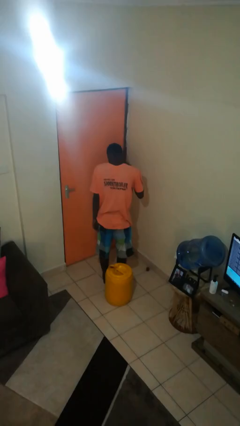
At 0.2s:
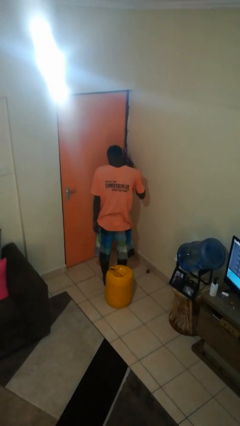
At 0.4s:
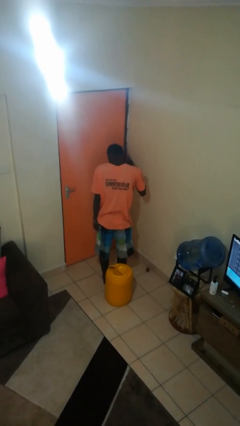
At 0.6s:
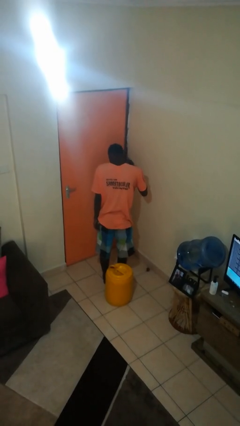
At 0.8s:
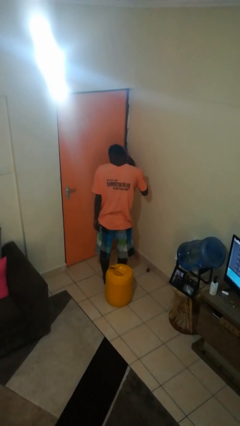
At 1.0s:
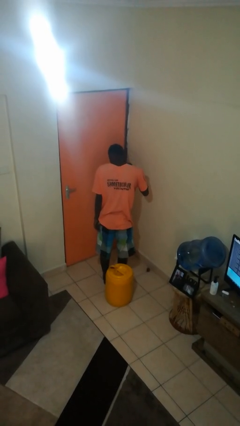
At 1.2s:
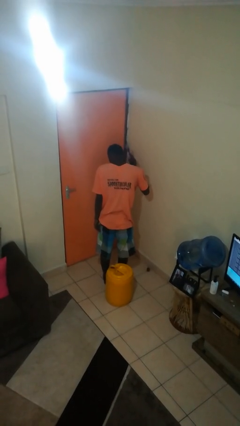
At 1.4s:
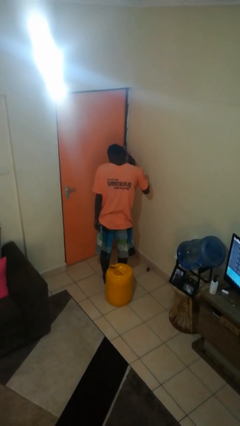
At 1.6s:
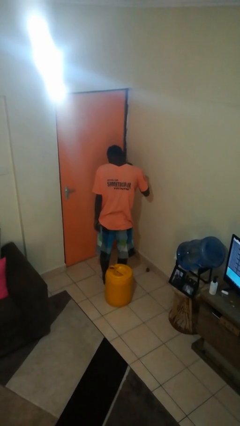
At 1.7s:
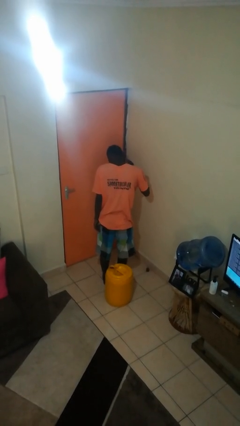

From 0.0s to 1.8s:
person brushes hair

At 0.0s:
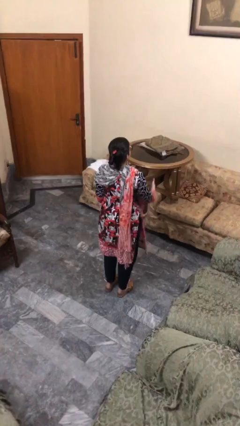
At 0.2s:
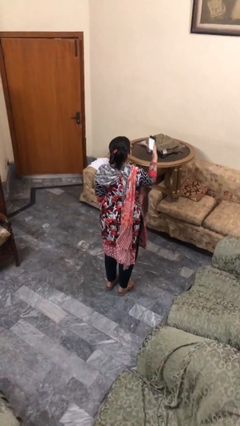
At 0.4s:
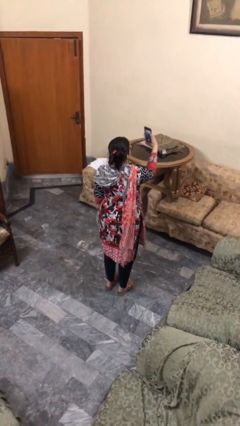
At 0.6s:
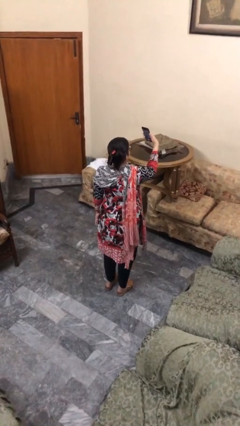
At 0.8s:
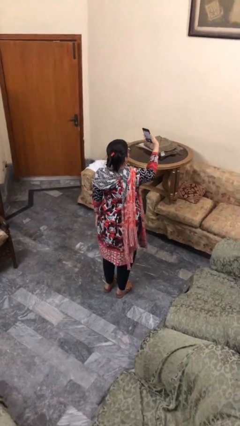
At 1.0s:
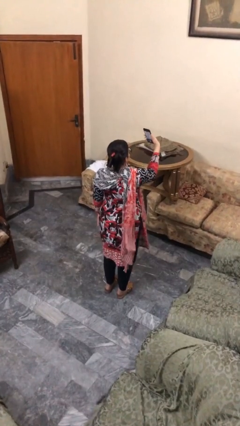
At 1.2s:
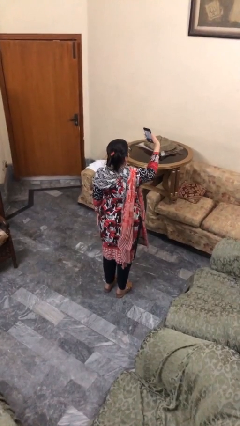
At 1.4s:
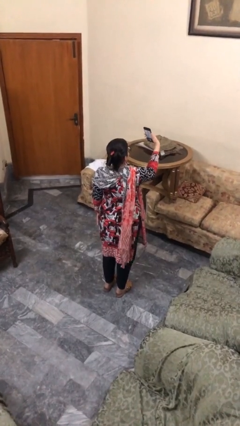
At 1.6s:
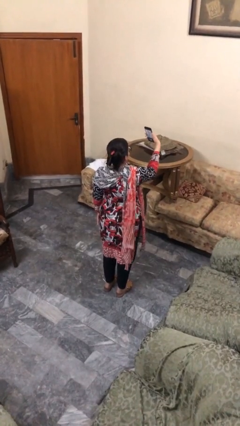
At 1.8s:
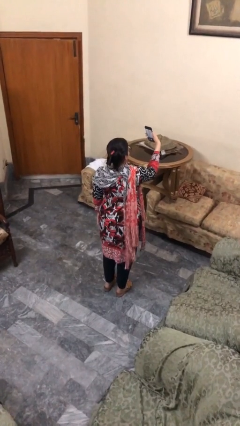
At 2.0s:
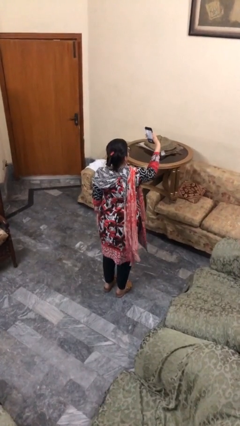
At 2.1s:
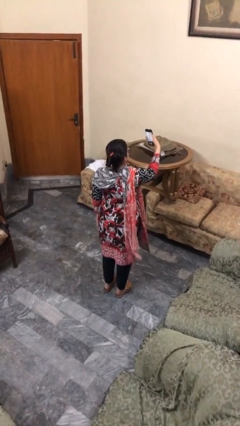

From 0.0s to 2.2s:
person takes selfie

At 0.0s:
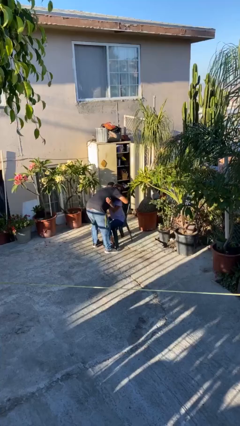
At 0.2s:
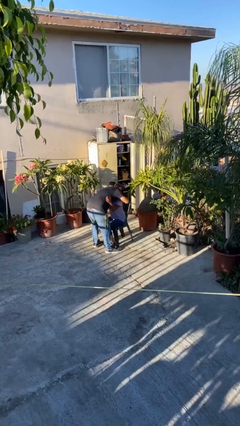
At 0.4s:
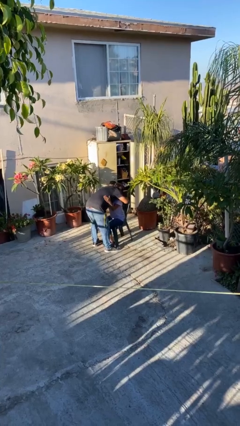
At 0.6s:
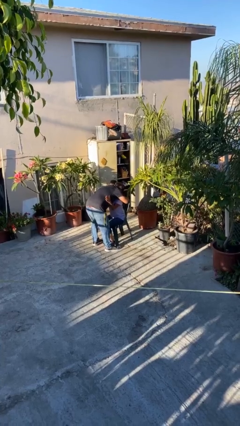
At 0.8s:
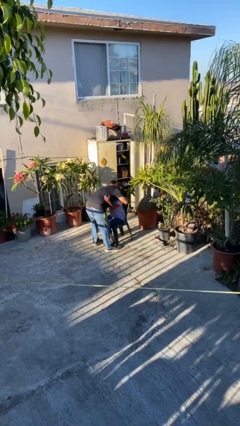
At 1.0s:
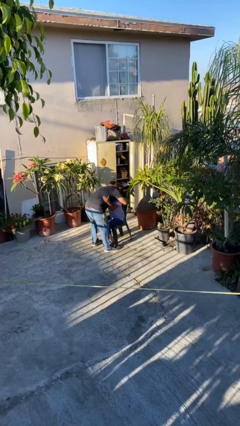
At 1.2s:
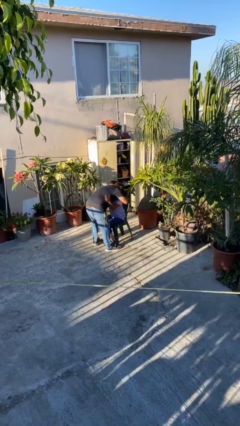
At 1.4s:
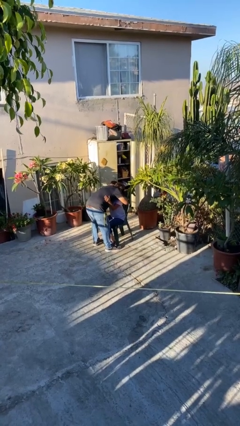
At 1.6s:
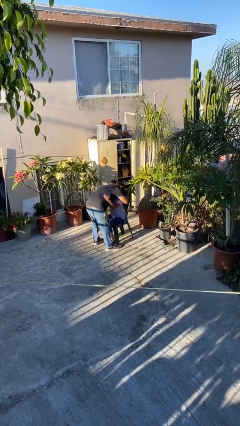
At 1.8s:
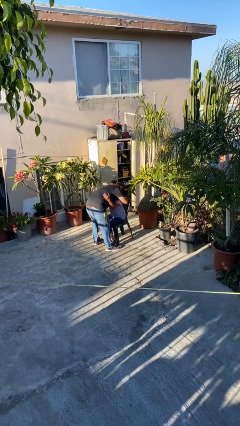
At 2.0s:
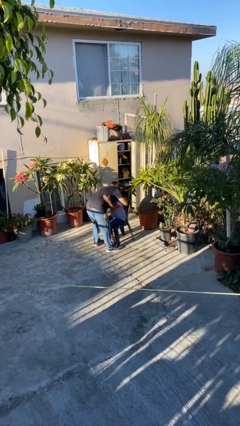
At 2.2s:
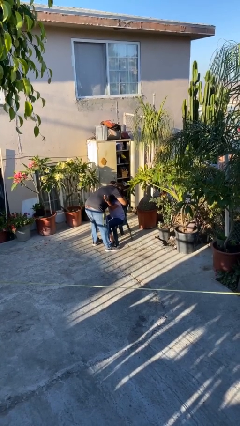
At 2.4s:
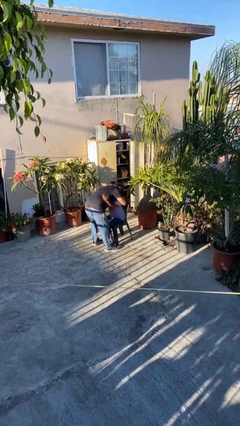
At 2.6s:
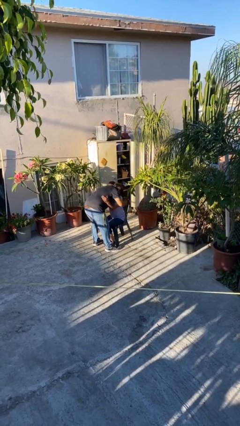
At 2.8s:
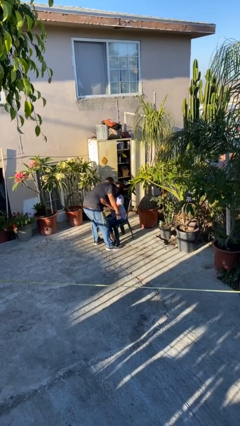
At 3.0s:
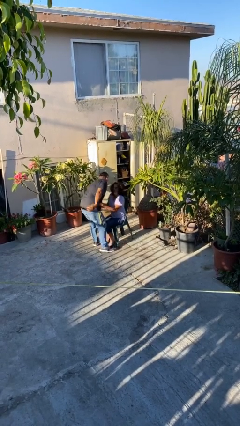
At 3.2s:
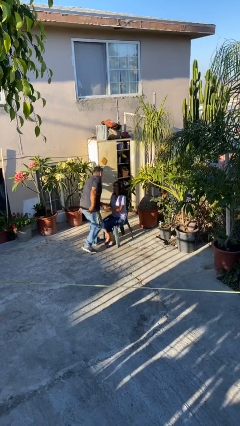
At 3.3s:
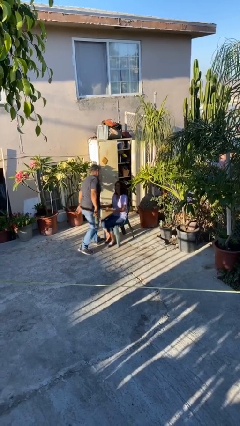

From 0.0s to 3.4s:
person embraces person

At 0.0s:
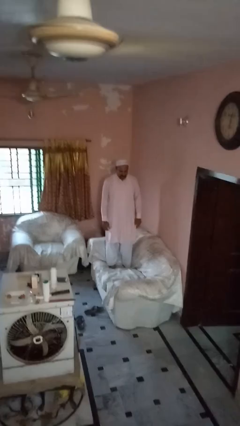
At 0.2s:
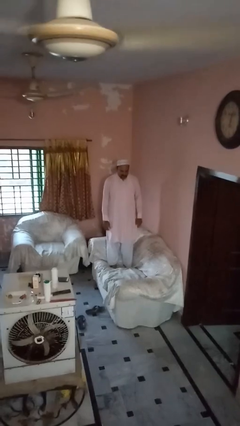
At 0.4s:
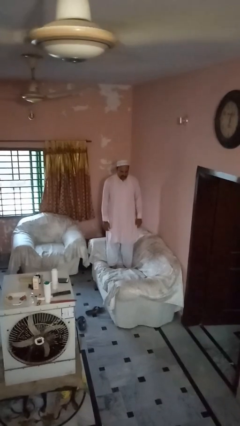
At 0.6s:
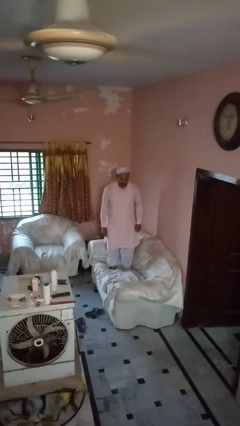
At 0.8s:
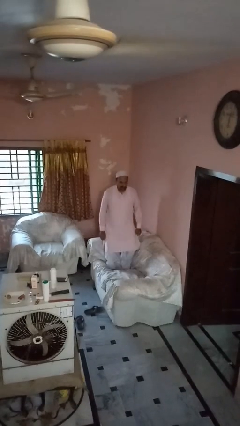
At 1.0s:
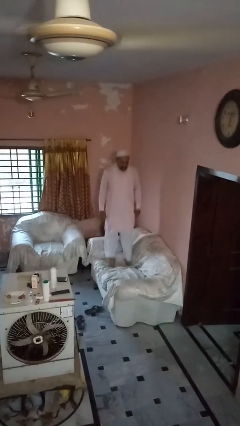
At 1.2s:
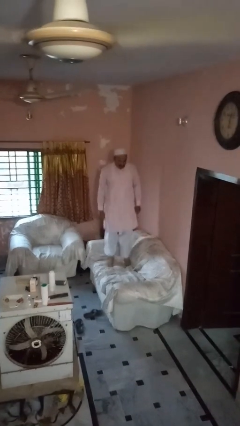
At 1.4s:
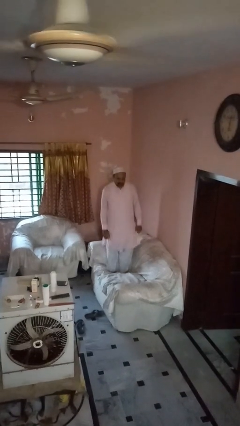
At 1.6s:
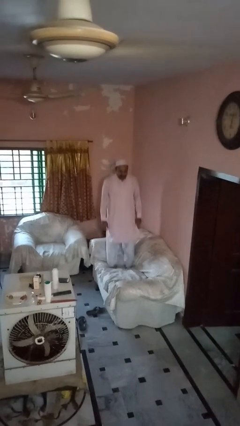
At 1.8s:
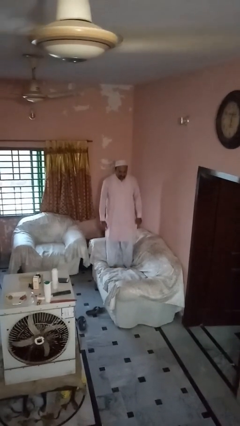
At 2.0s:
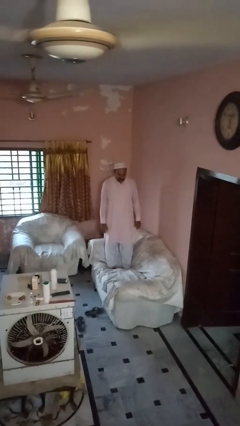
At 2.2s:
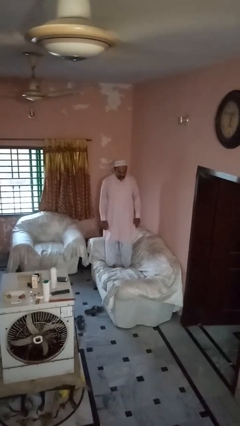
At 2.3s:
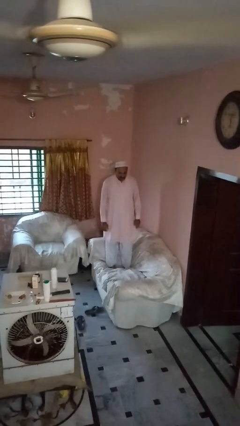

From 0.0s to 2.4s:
person jumps on couch

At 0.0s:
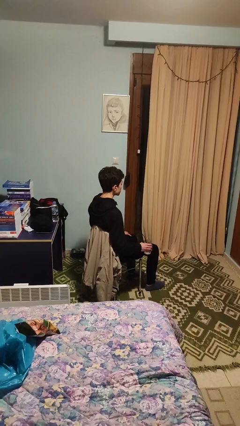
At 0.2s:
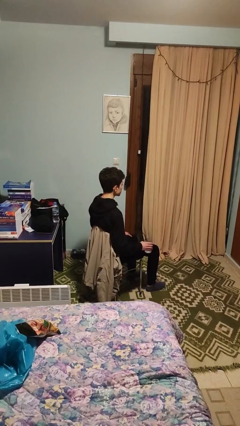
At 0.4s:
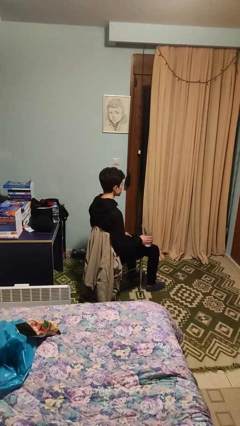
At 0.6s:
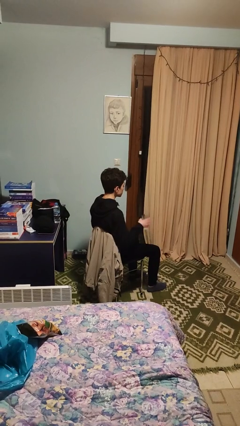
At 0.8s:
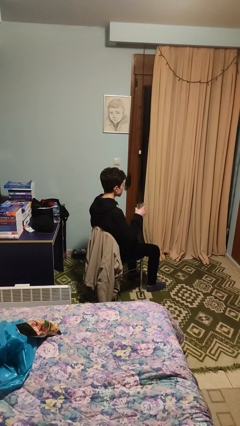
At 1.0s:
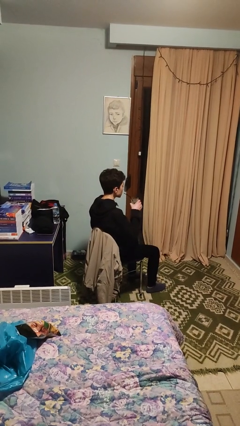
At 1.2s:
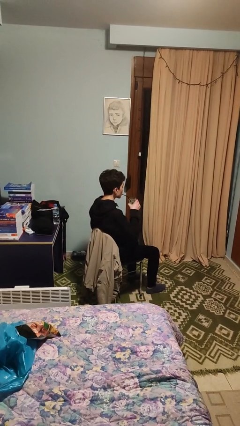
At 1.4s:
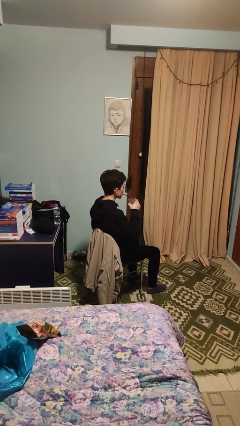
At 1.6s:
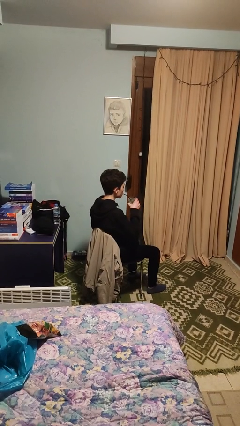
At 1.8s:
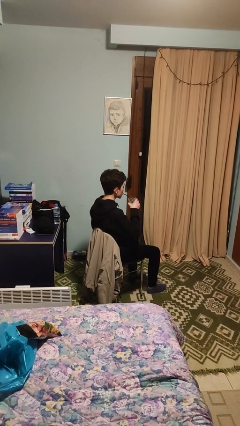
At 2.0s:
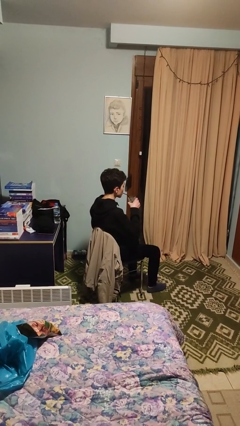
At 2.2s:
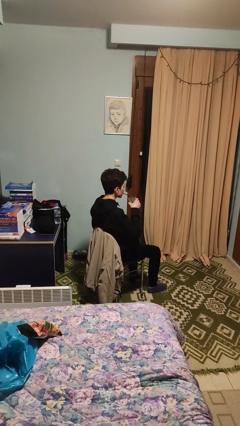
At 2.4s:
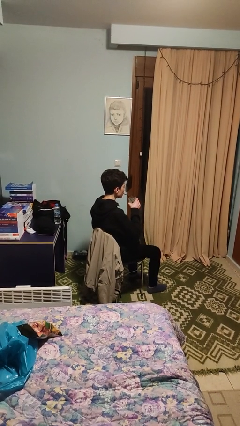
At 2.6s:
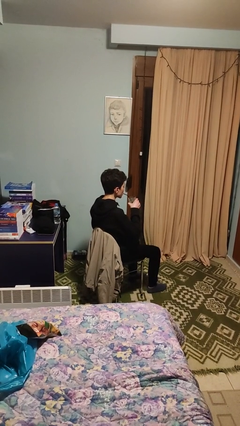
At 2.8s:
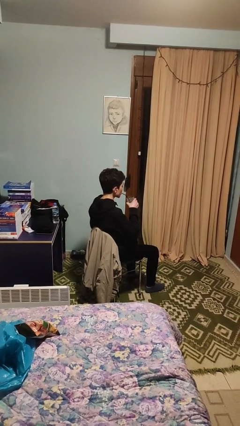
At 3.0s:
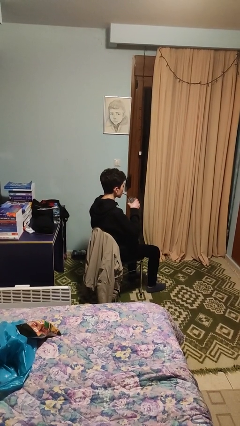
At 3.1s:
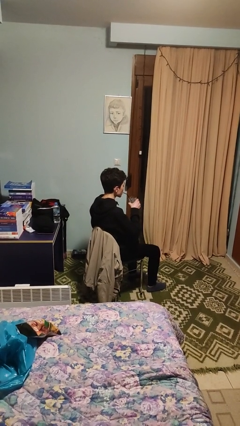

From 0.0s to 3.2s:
person drinks from straw

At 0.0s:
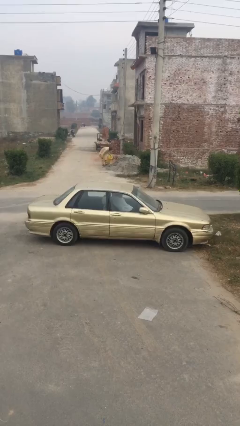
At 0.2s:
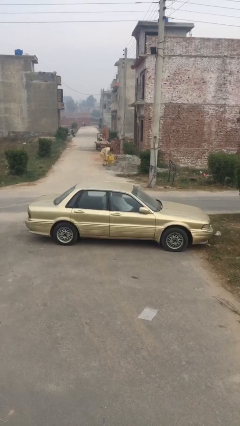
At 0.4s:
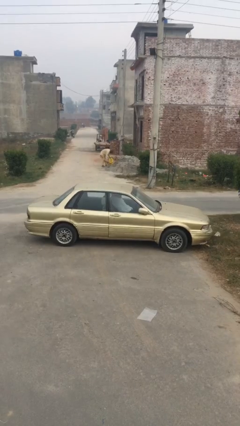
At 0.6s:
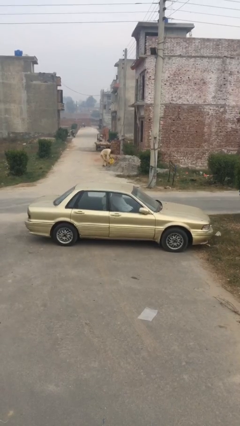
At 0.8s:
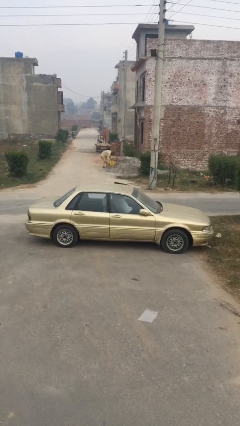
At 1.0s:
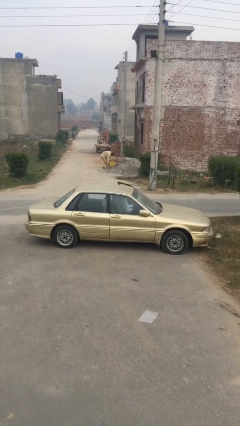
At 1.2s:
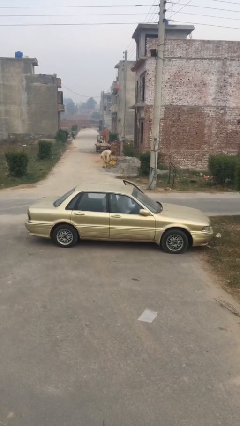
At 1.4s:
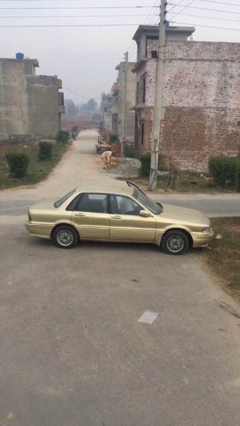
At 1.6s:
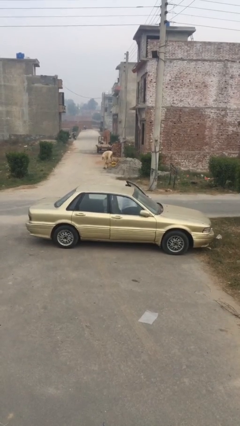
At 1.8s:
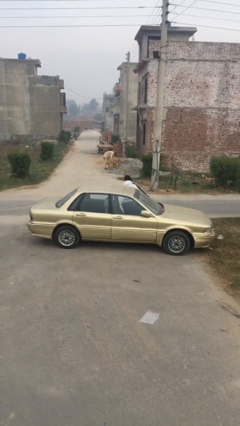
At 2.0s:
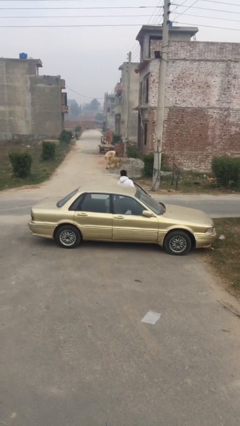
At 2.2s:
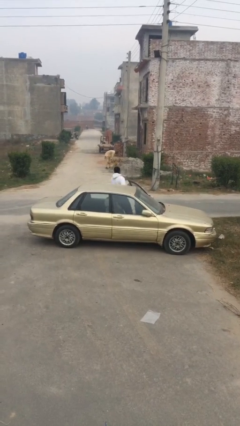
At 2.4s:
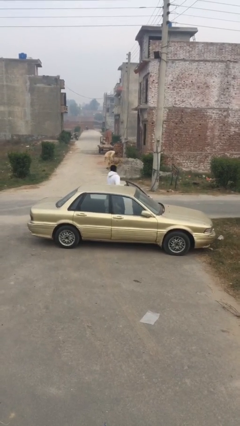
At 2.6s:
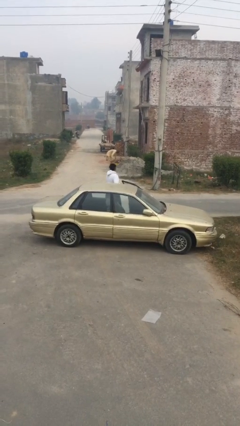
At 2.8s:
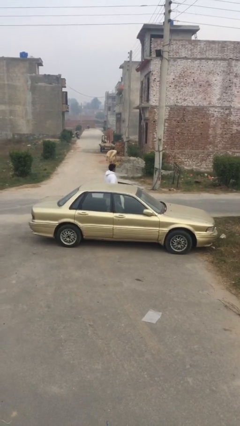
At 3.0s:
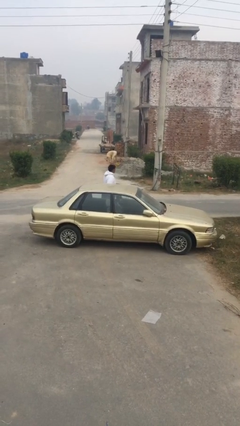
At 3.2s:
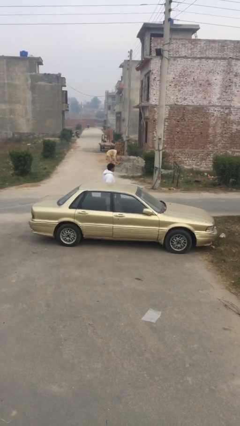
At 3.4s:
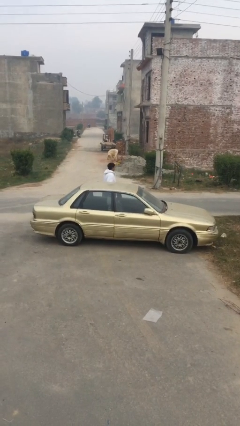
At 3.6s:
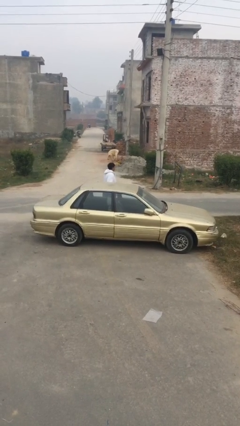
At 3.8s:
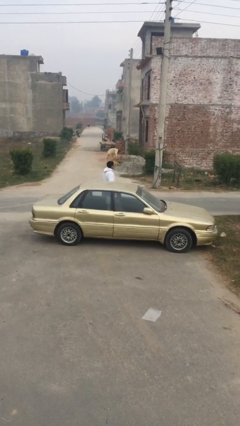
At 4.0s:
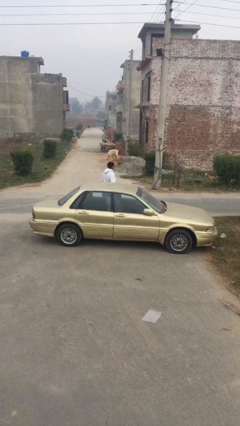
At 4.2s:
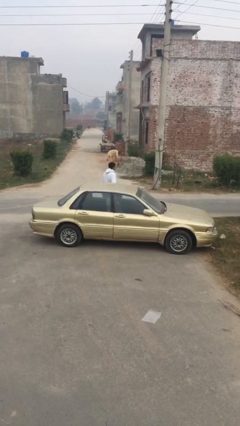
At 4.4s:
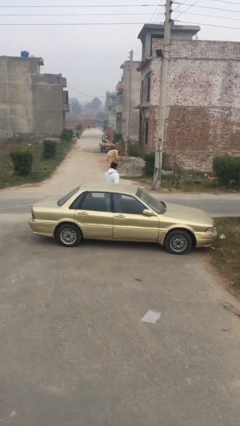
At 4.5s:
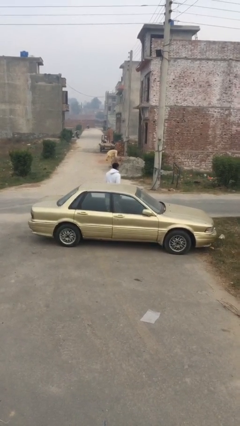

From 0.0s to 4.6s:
car drops off person
